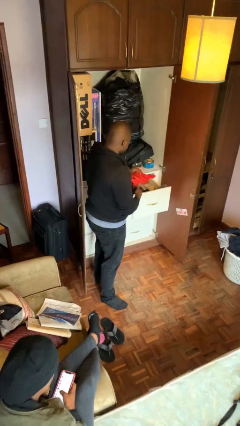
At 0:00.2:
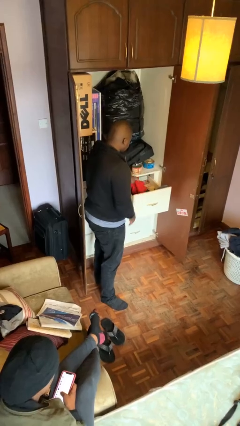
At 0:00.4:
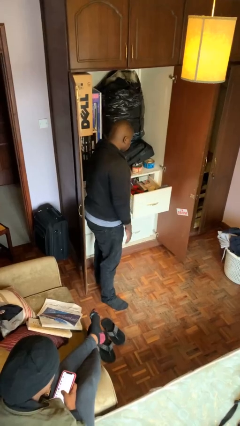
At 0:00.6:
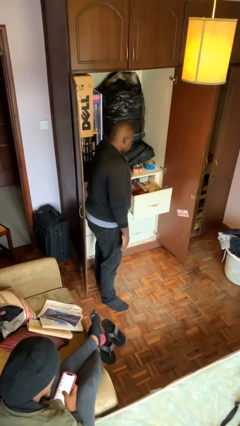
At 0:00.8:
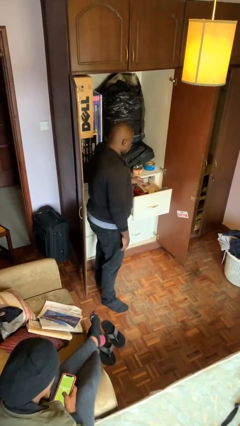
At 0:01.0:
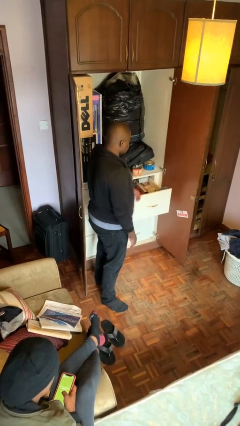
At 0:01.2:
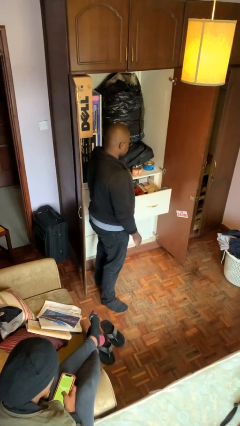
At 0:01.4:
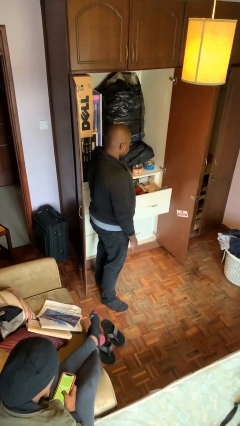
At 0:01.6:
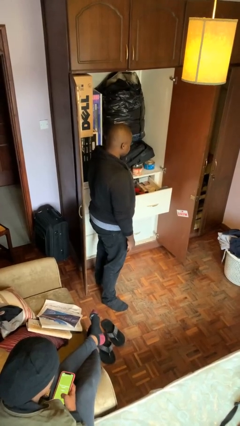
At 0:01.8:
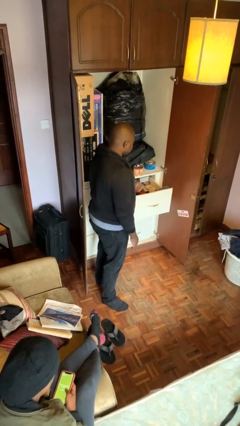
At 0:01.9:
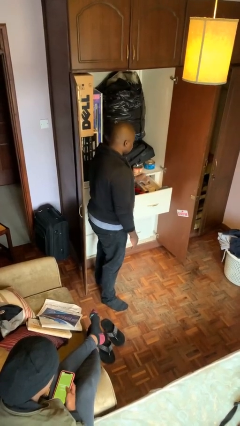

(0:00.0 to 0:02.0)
person puts clothes into dresser

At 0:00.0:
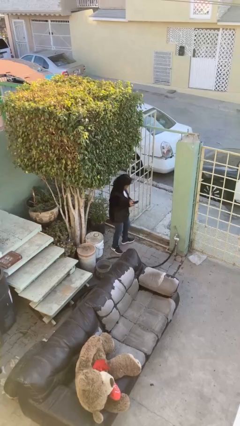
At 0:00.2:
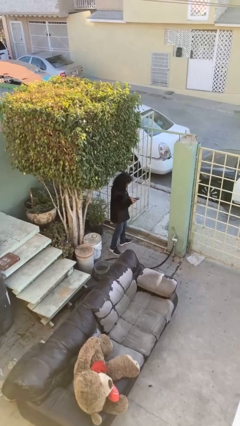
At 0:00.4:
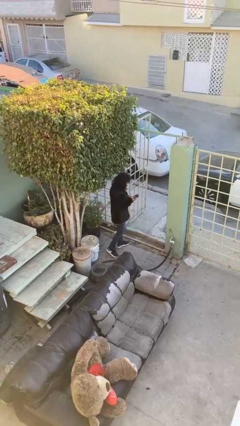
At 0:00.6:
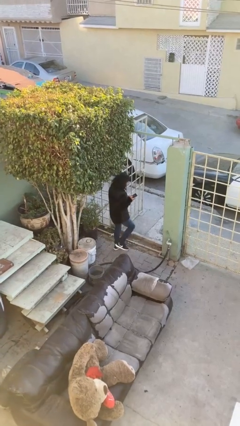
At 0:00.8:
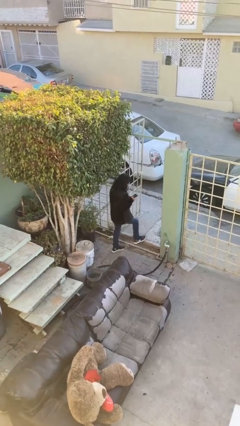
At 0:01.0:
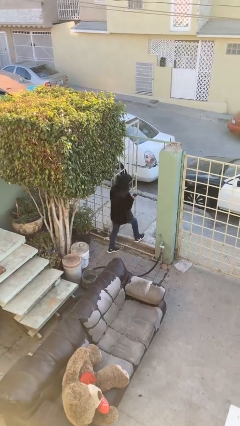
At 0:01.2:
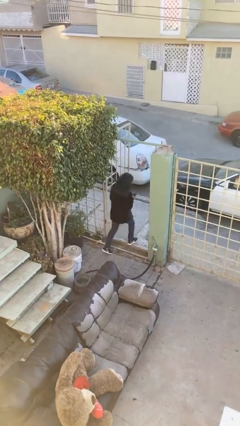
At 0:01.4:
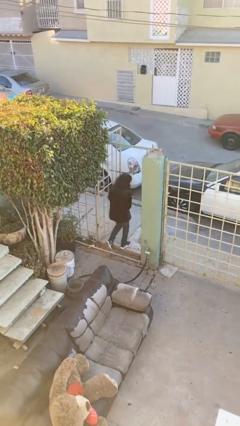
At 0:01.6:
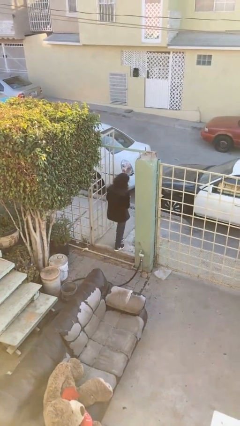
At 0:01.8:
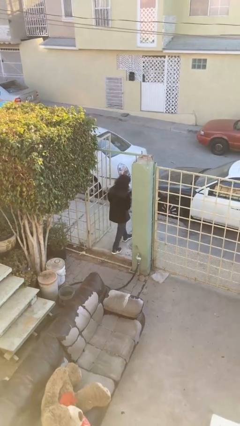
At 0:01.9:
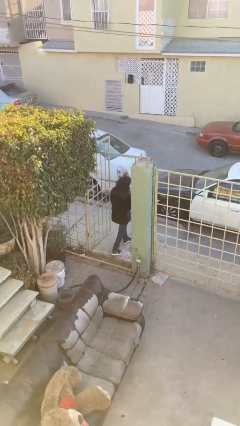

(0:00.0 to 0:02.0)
person exits scene through structure

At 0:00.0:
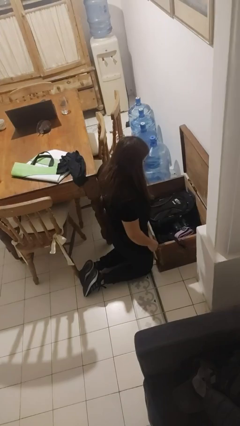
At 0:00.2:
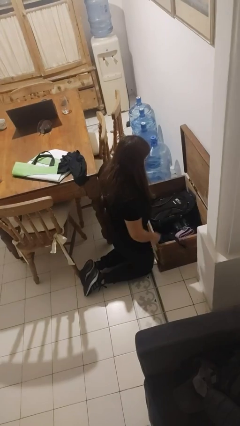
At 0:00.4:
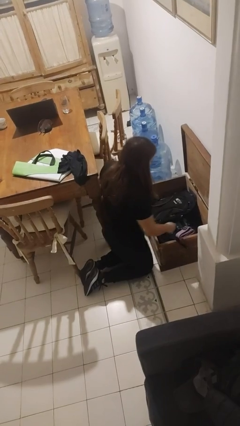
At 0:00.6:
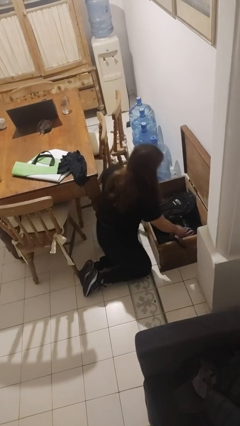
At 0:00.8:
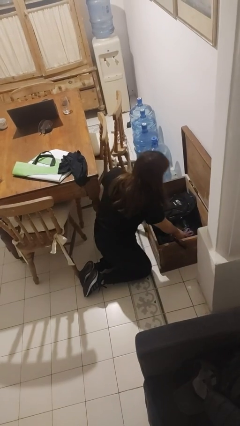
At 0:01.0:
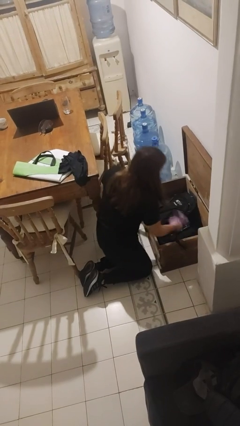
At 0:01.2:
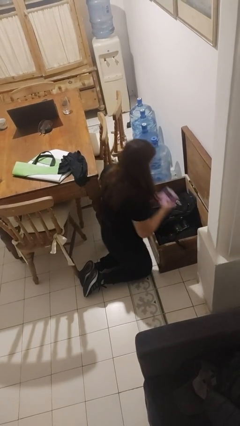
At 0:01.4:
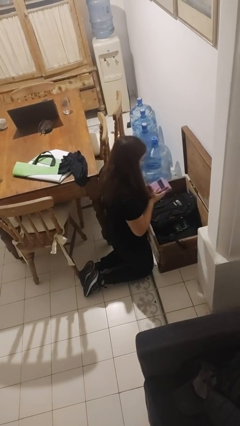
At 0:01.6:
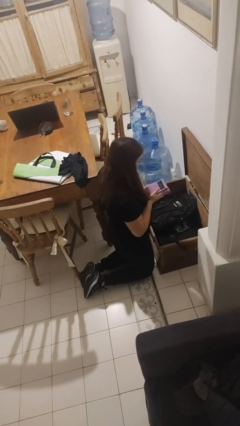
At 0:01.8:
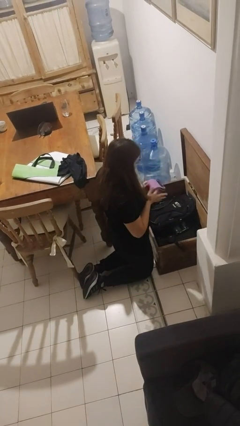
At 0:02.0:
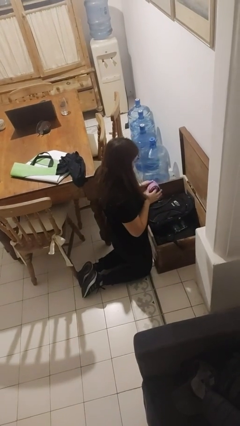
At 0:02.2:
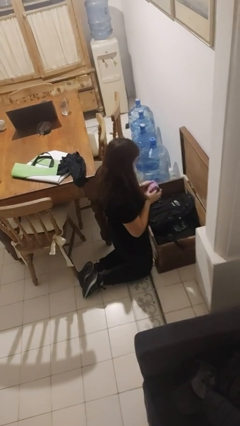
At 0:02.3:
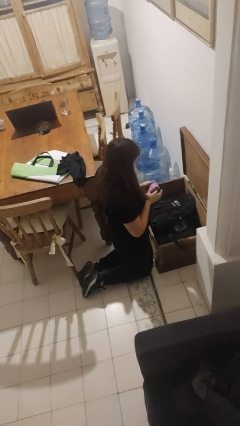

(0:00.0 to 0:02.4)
person takes object from box

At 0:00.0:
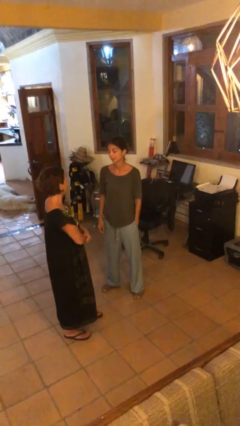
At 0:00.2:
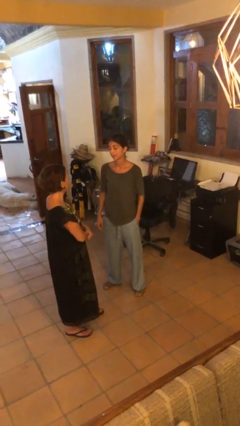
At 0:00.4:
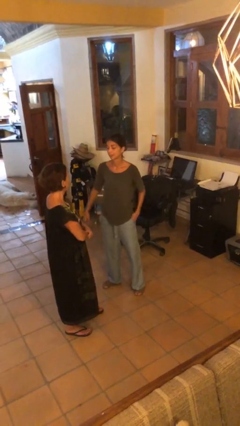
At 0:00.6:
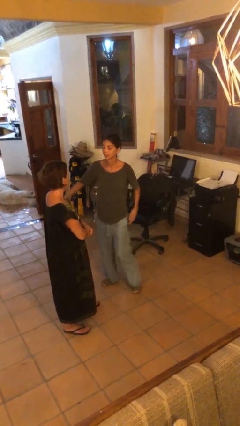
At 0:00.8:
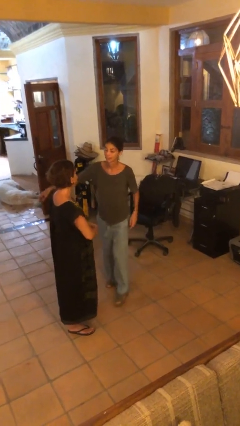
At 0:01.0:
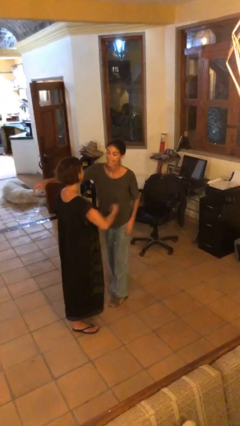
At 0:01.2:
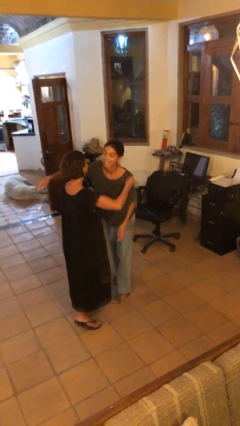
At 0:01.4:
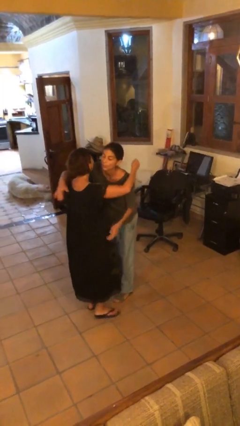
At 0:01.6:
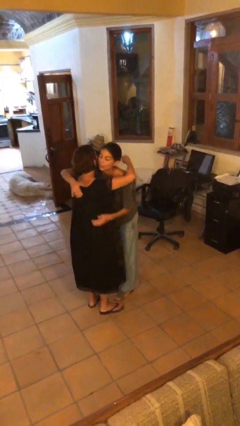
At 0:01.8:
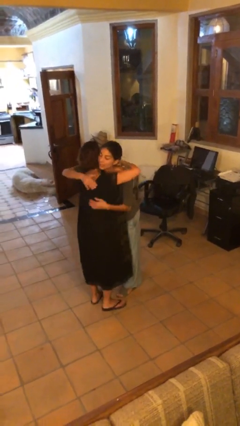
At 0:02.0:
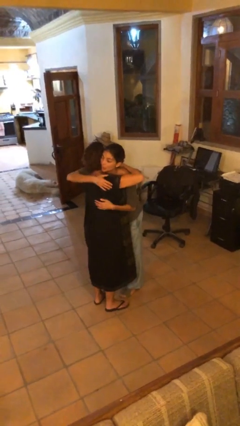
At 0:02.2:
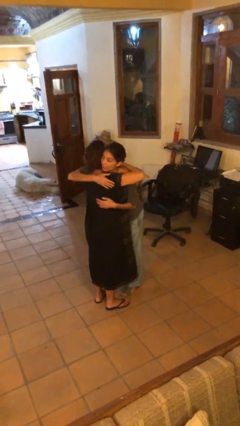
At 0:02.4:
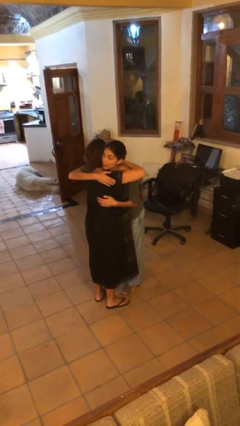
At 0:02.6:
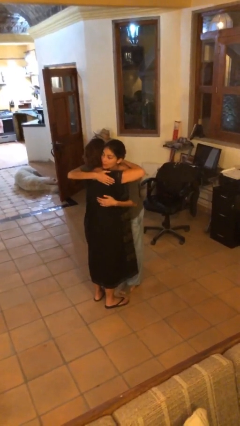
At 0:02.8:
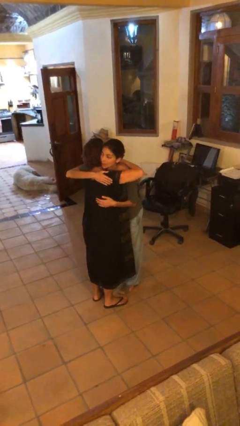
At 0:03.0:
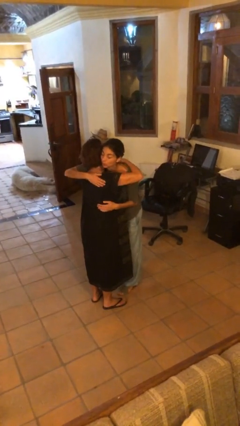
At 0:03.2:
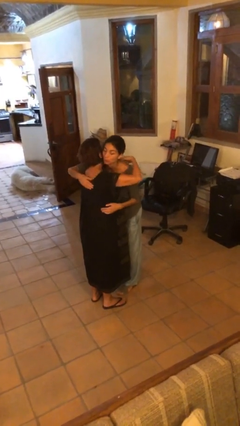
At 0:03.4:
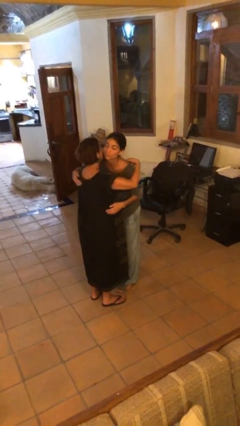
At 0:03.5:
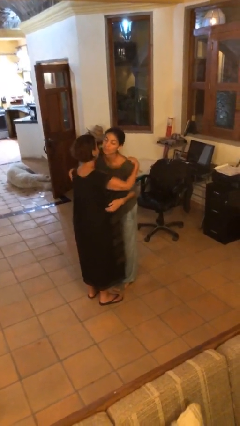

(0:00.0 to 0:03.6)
person embraces person

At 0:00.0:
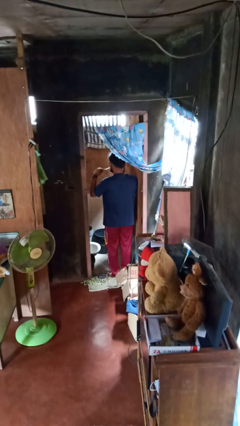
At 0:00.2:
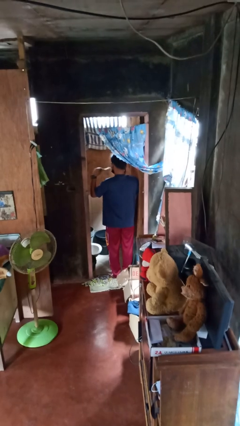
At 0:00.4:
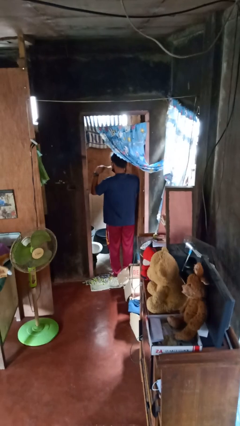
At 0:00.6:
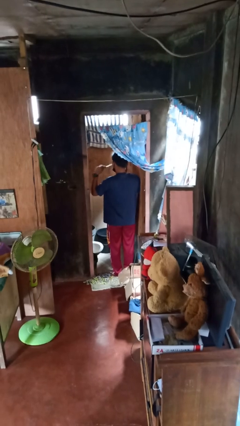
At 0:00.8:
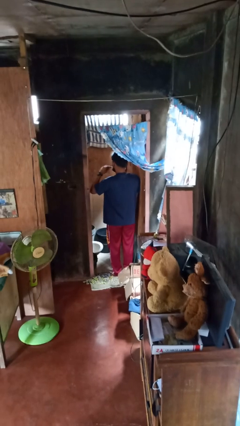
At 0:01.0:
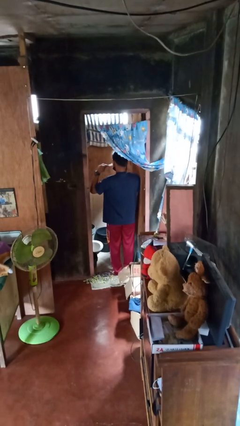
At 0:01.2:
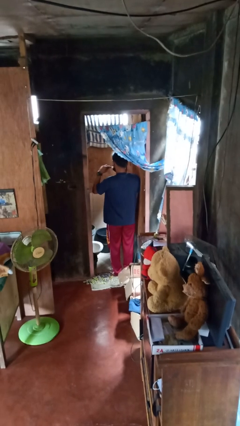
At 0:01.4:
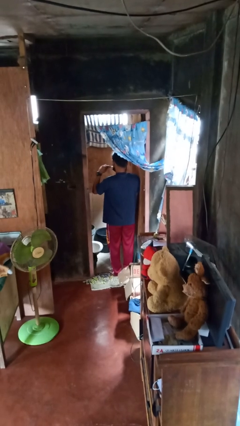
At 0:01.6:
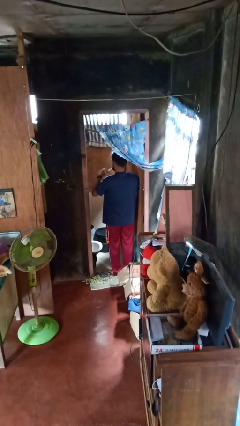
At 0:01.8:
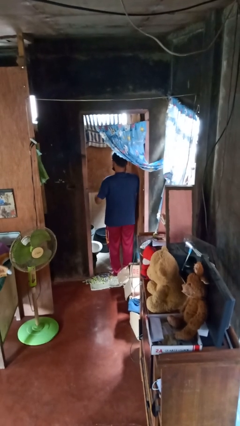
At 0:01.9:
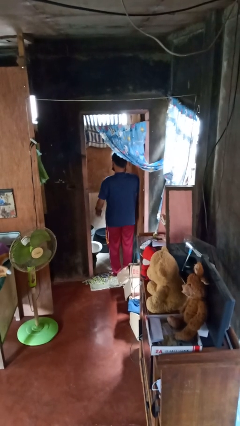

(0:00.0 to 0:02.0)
person brushes teeth

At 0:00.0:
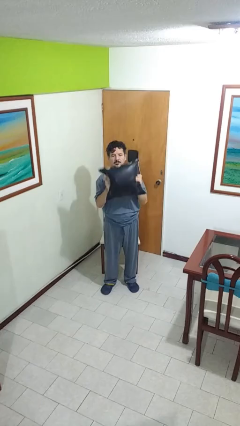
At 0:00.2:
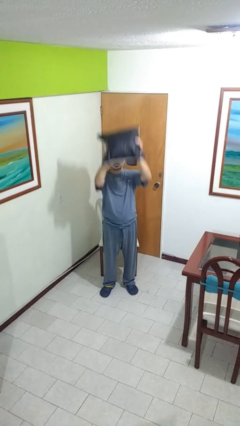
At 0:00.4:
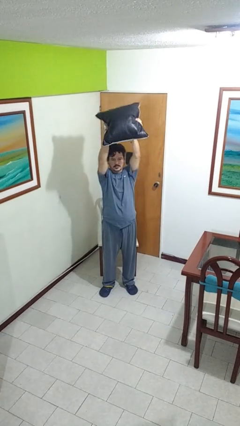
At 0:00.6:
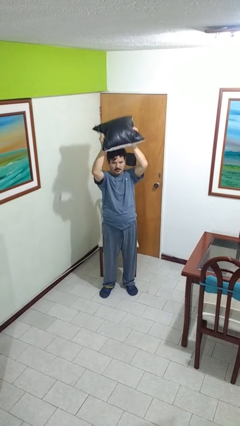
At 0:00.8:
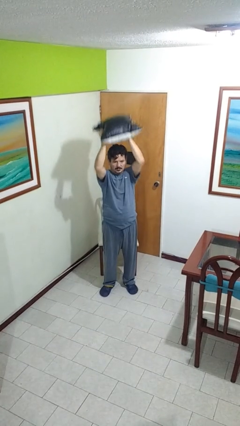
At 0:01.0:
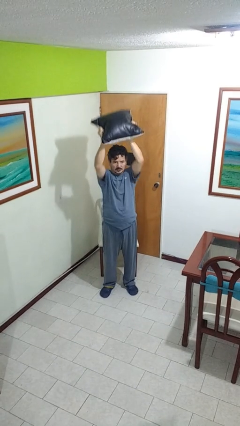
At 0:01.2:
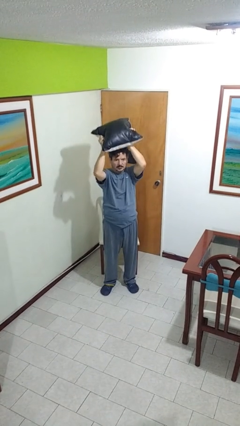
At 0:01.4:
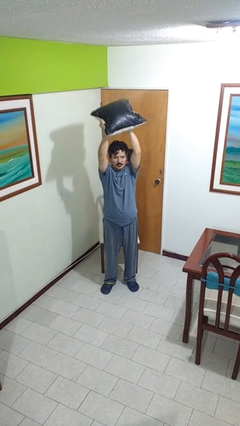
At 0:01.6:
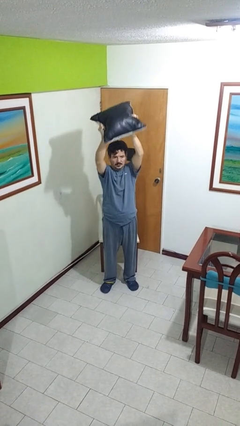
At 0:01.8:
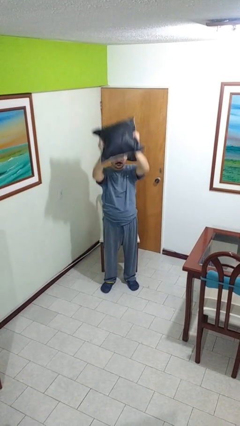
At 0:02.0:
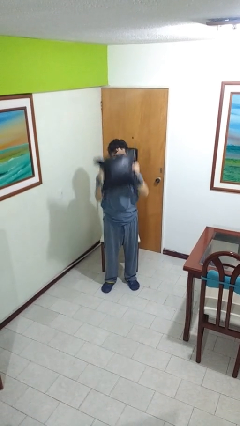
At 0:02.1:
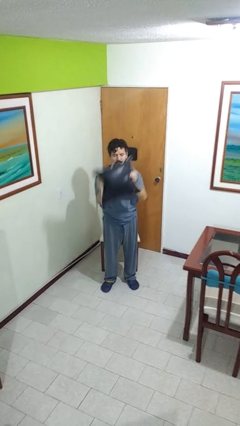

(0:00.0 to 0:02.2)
person holds object above head

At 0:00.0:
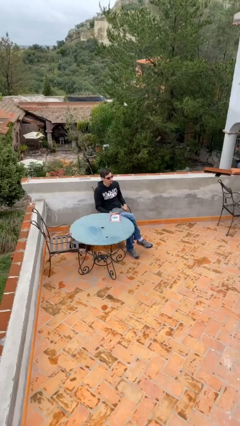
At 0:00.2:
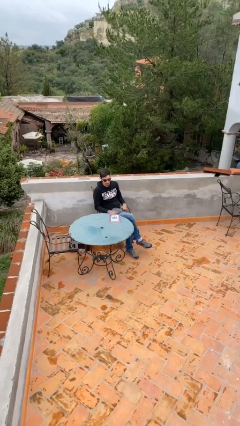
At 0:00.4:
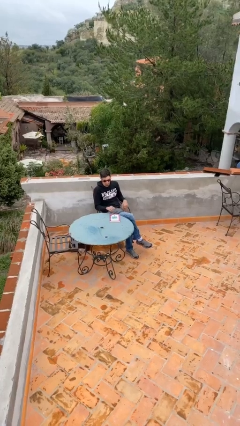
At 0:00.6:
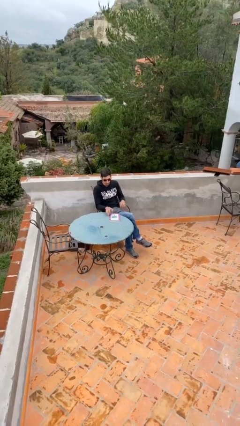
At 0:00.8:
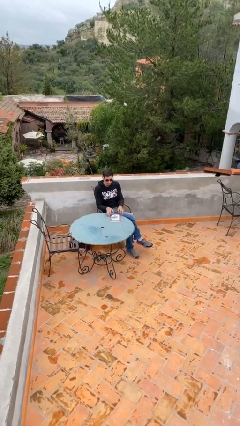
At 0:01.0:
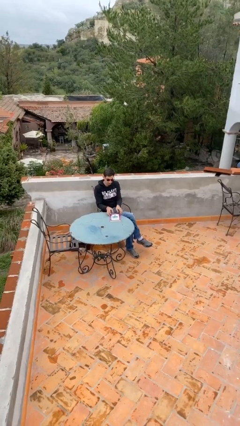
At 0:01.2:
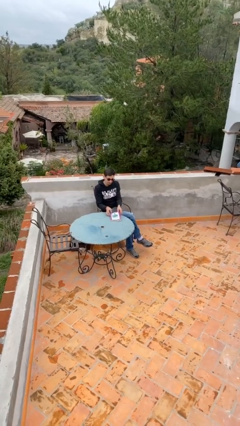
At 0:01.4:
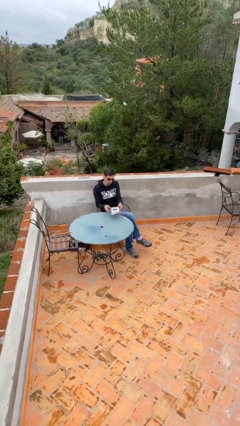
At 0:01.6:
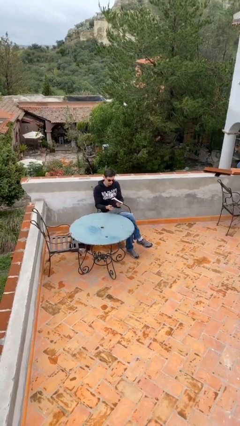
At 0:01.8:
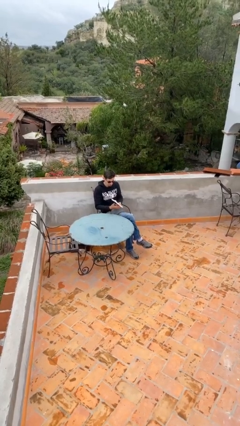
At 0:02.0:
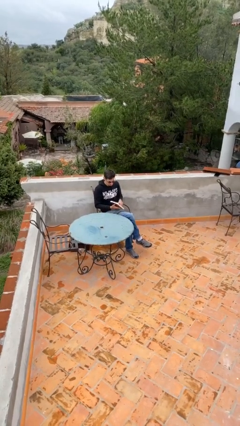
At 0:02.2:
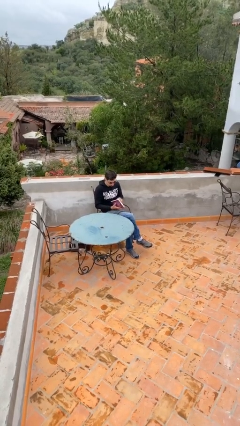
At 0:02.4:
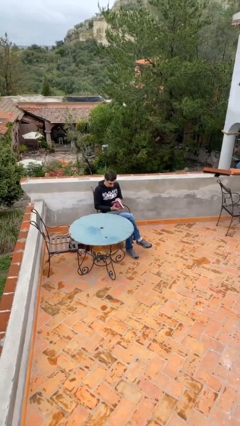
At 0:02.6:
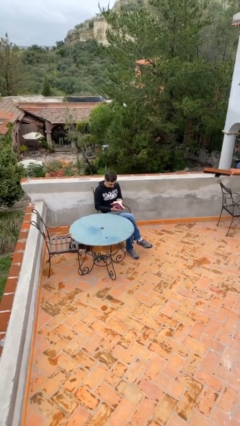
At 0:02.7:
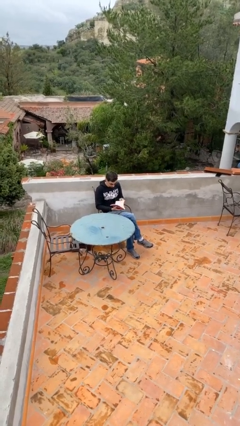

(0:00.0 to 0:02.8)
person picks up object from table
